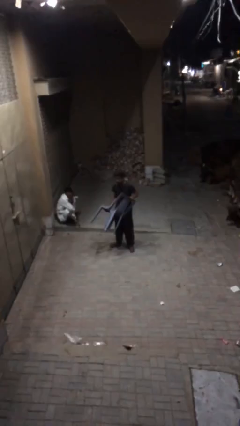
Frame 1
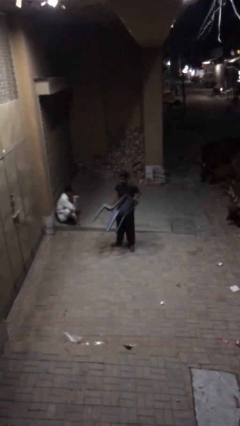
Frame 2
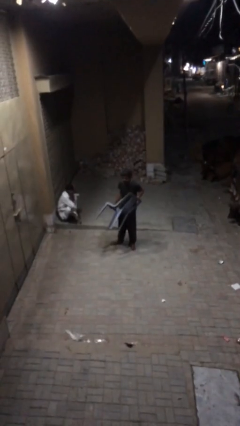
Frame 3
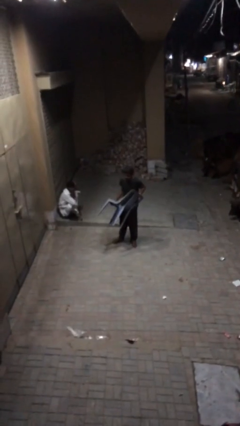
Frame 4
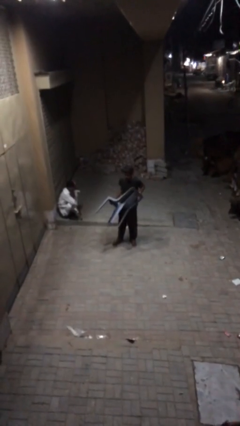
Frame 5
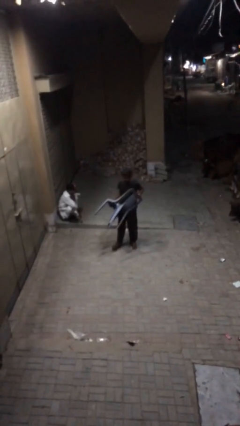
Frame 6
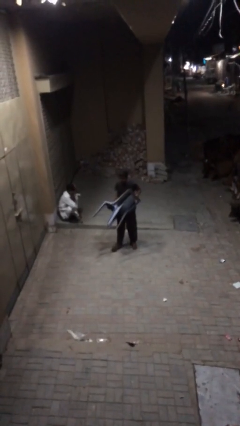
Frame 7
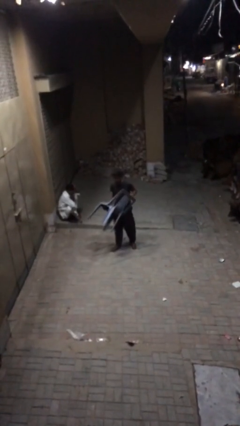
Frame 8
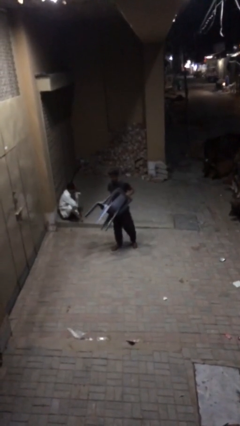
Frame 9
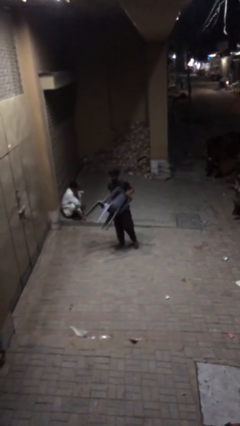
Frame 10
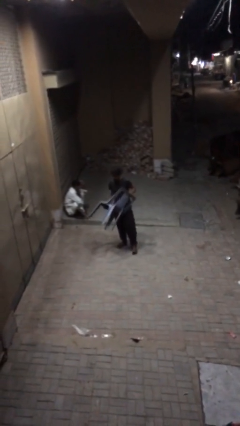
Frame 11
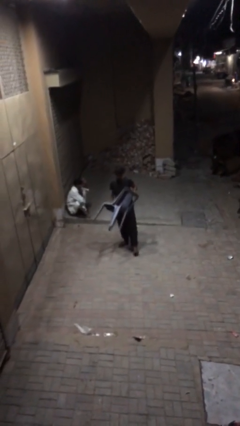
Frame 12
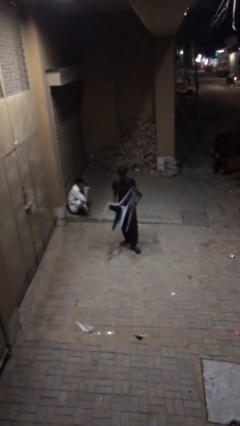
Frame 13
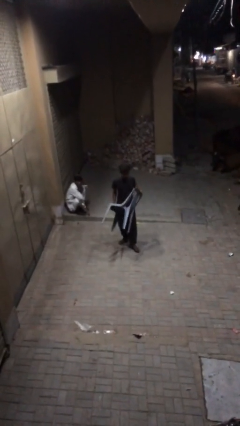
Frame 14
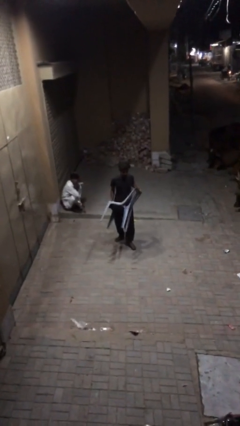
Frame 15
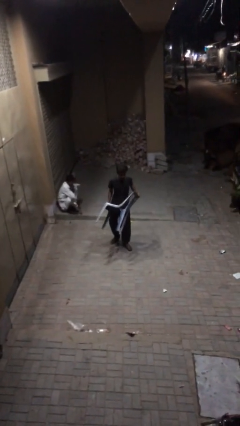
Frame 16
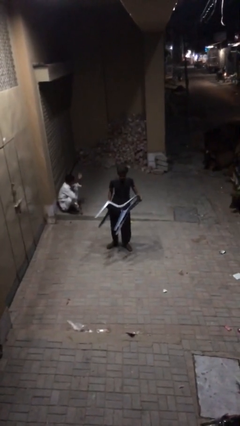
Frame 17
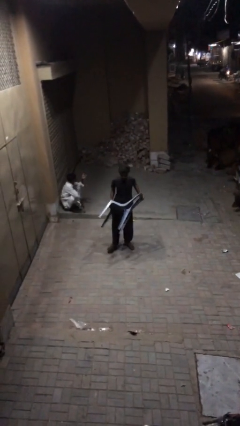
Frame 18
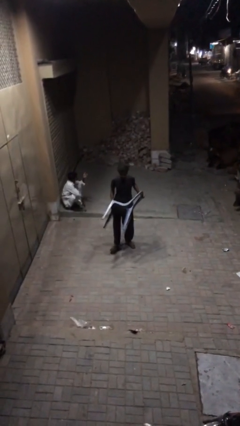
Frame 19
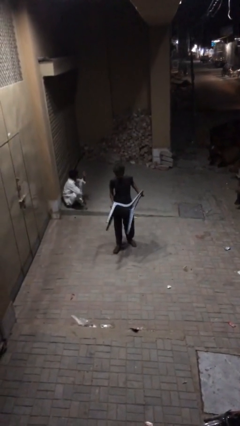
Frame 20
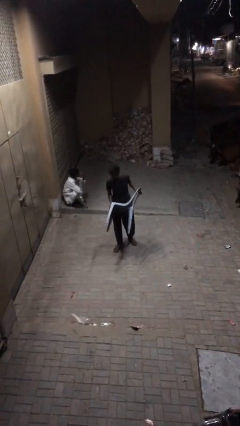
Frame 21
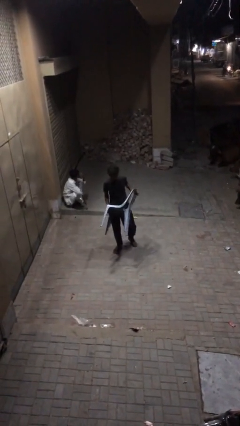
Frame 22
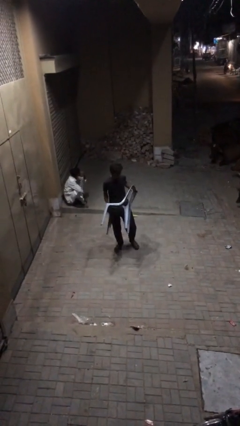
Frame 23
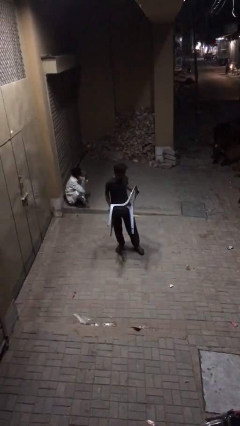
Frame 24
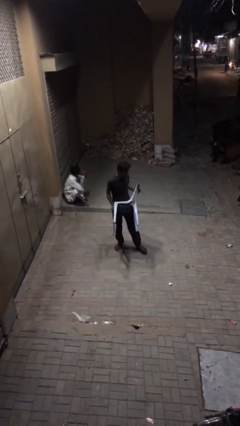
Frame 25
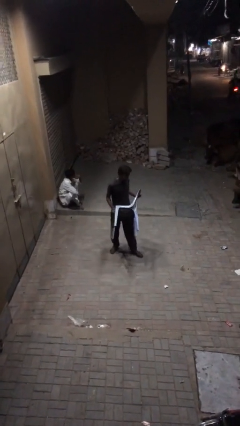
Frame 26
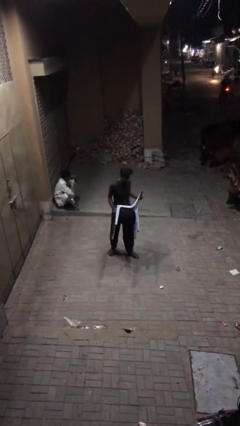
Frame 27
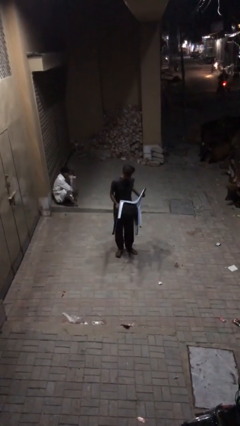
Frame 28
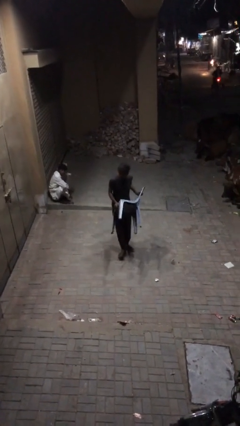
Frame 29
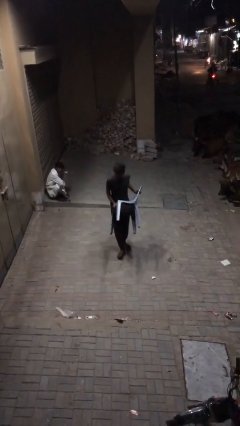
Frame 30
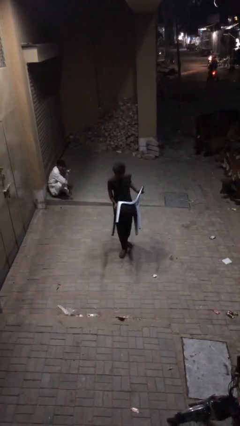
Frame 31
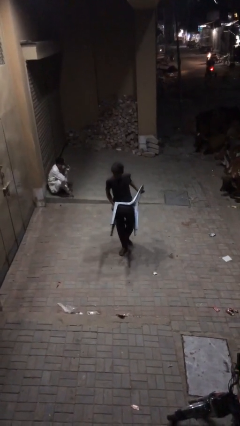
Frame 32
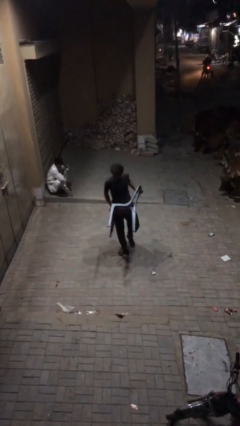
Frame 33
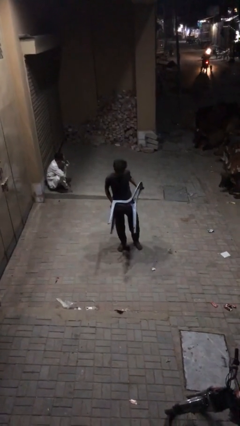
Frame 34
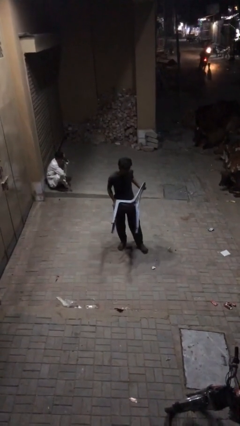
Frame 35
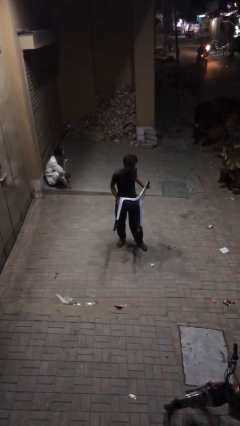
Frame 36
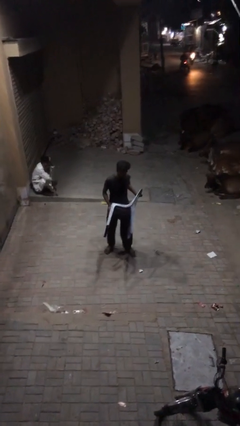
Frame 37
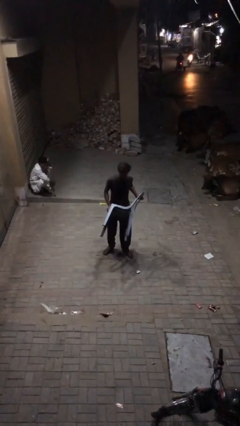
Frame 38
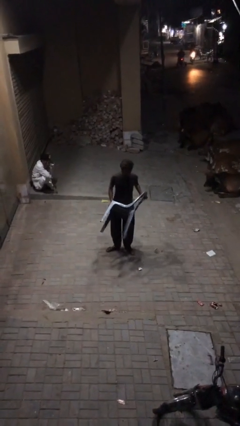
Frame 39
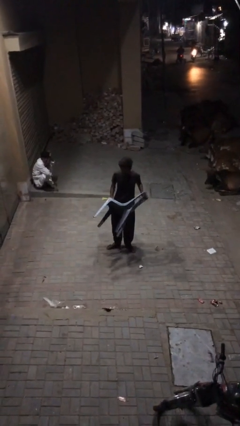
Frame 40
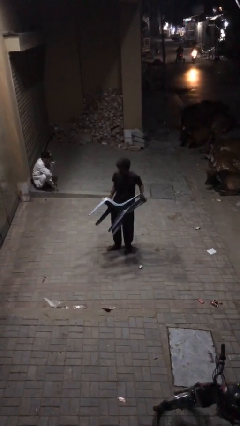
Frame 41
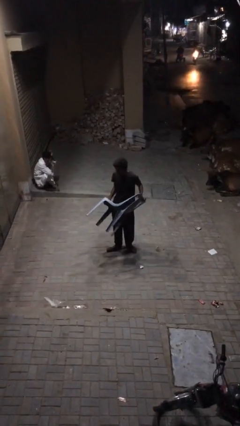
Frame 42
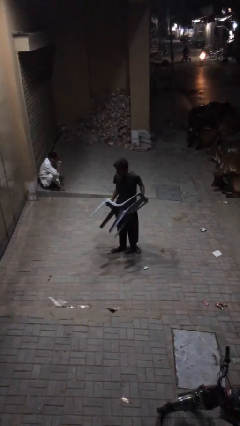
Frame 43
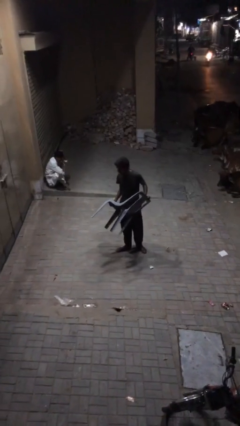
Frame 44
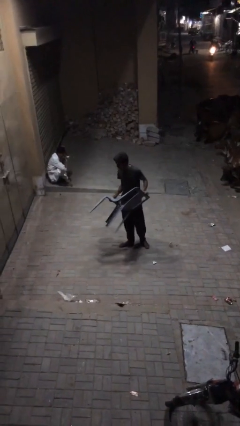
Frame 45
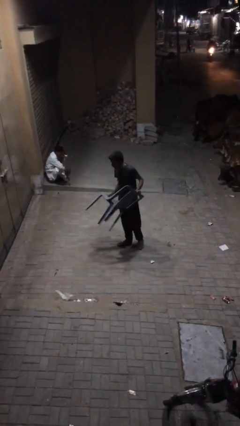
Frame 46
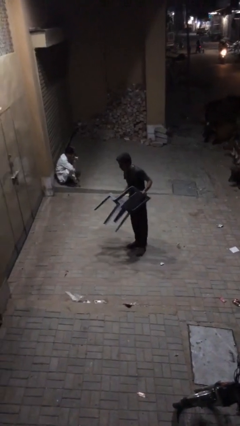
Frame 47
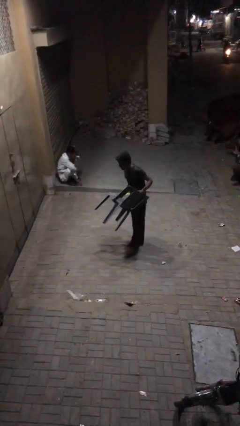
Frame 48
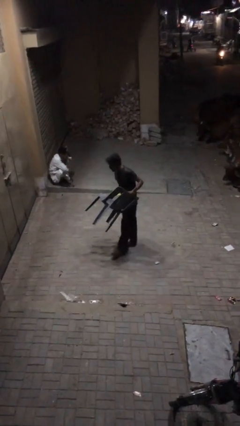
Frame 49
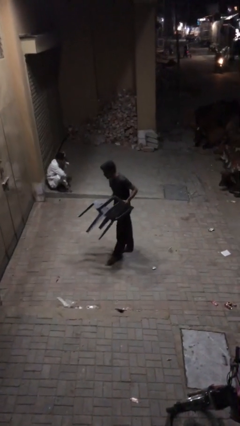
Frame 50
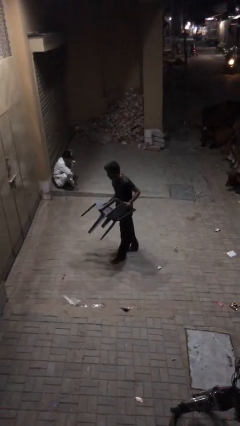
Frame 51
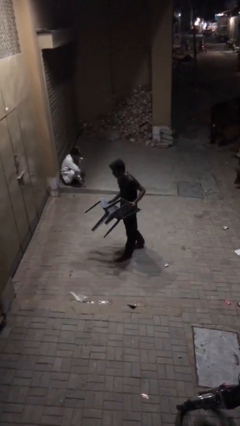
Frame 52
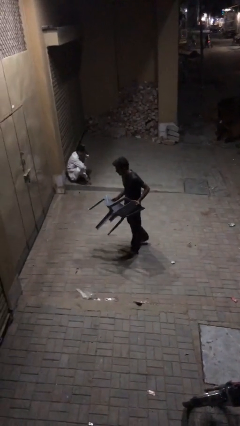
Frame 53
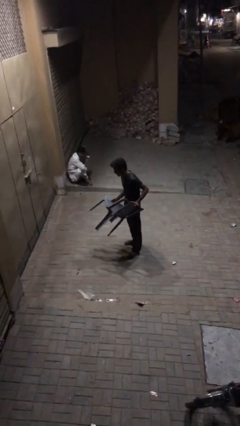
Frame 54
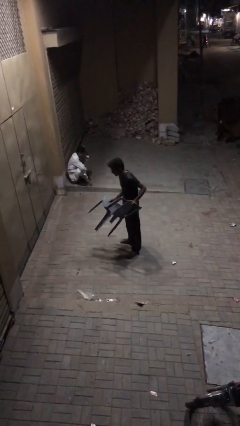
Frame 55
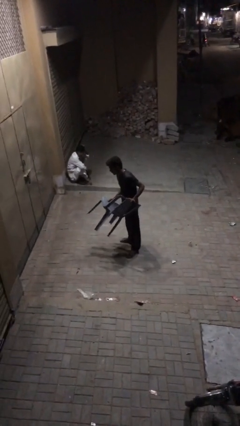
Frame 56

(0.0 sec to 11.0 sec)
person carries heavy object

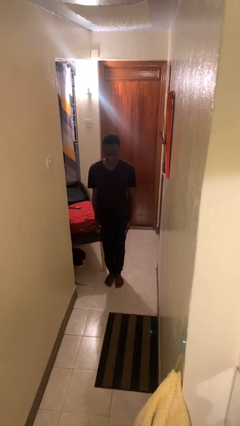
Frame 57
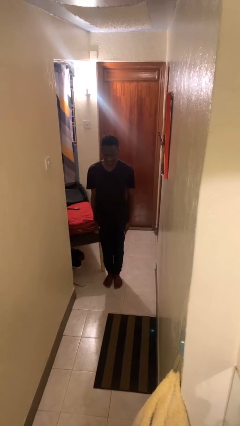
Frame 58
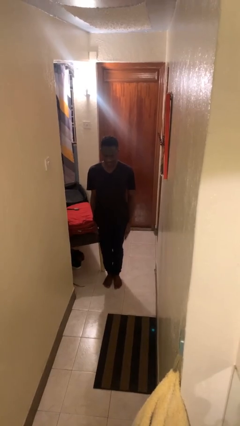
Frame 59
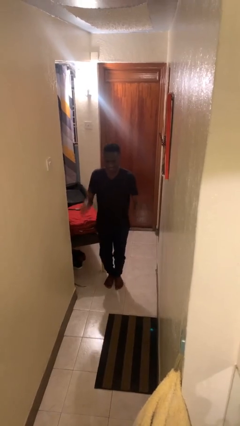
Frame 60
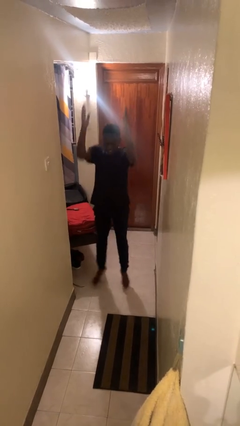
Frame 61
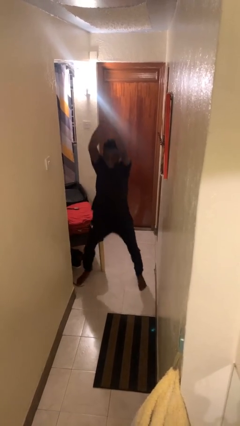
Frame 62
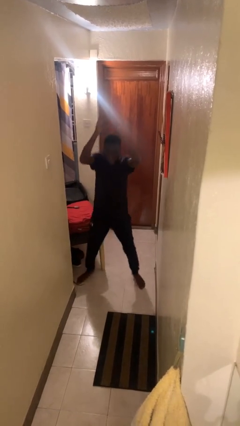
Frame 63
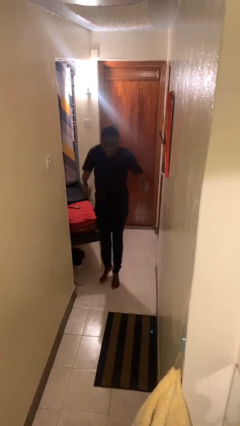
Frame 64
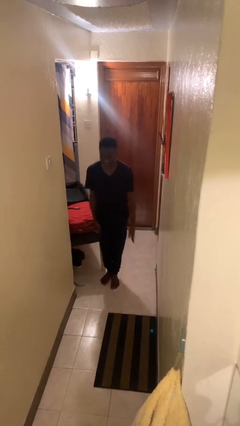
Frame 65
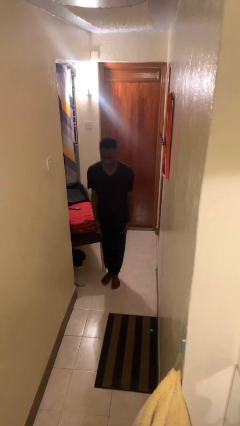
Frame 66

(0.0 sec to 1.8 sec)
person exercises with jumping jacks

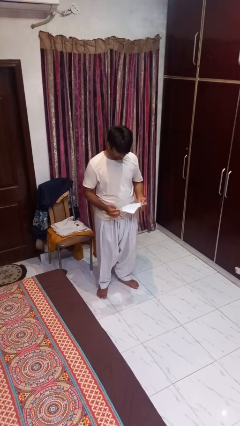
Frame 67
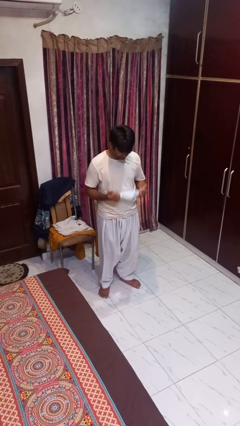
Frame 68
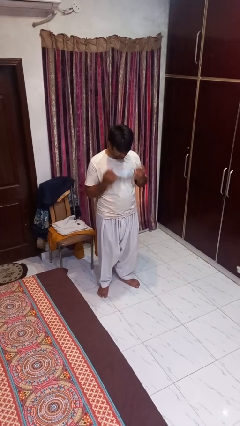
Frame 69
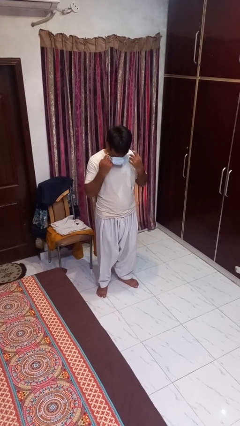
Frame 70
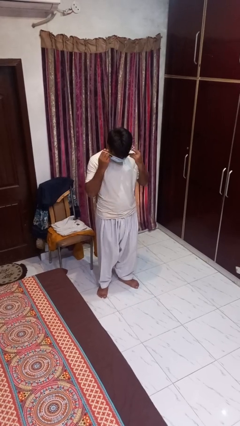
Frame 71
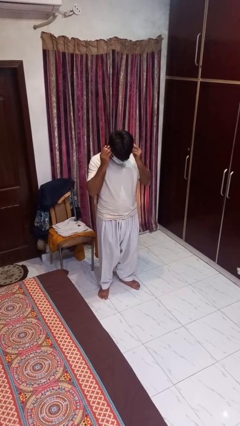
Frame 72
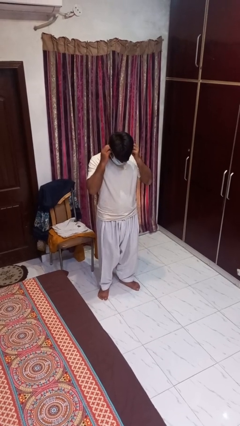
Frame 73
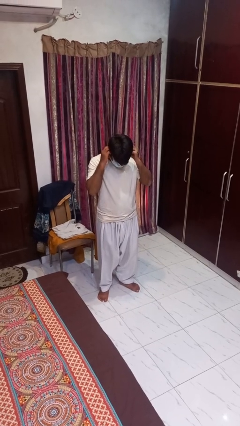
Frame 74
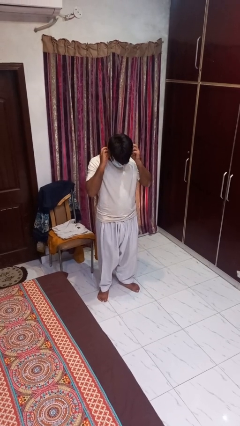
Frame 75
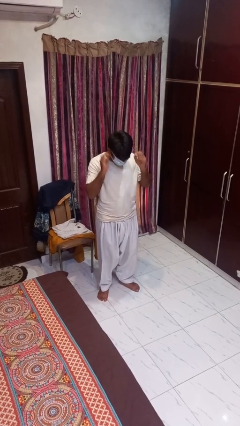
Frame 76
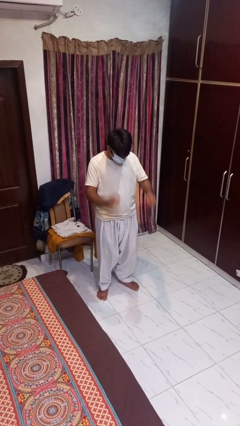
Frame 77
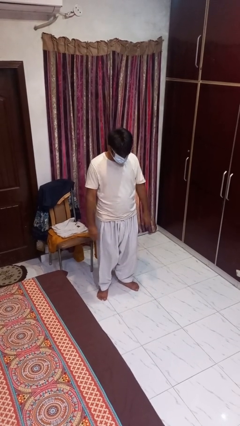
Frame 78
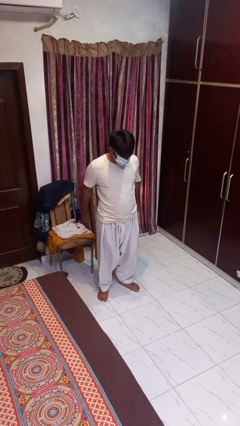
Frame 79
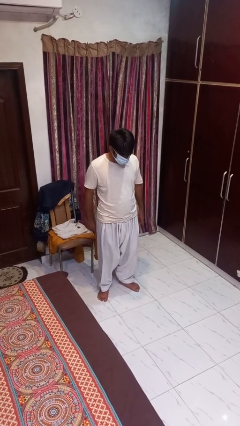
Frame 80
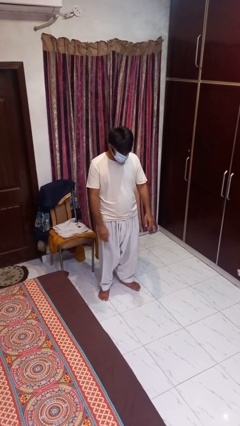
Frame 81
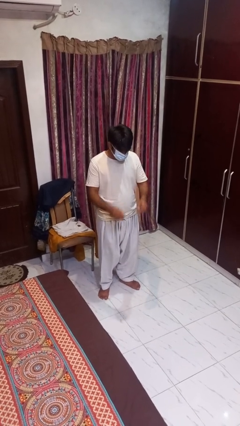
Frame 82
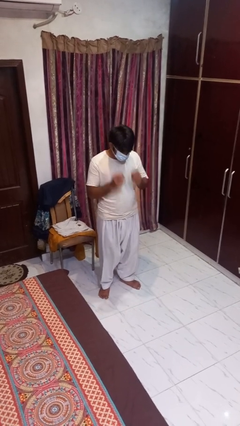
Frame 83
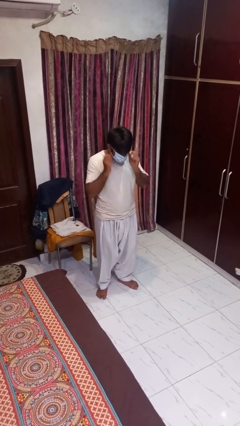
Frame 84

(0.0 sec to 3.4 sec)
person puts on facemask

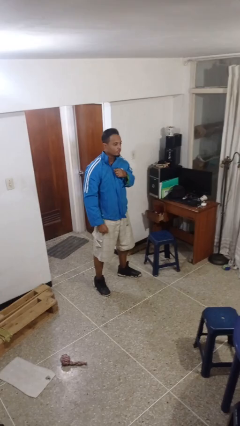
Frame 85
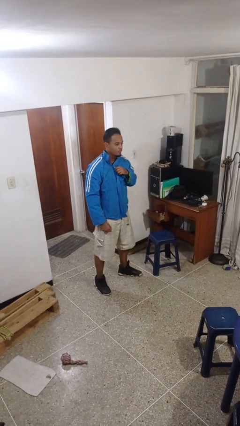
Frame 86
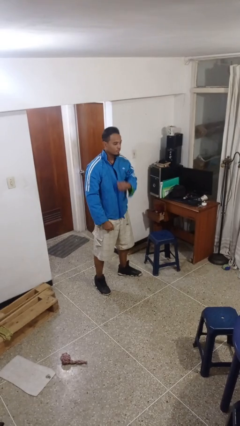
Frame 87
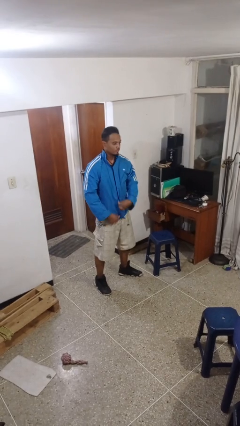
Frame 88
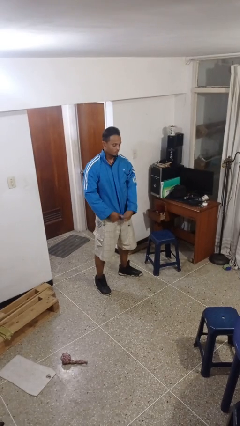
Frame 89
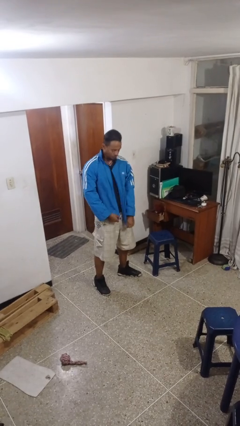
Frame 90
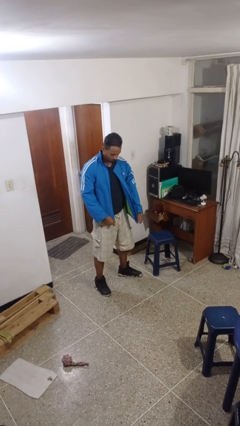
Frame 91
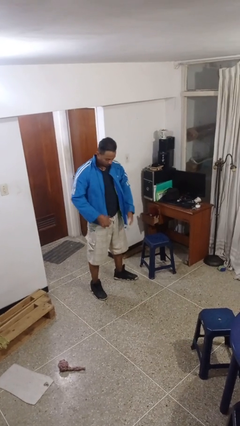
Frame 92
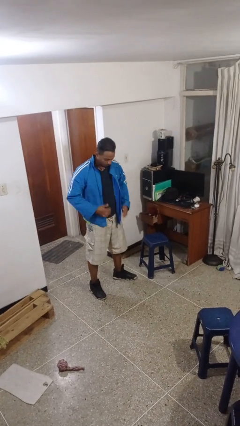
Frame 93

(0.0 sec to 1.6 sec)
person unzips jacket
